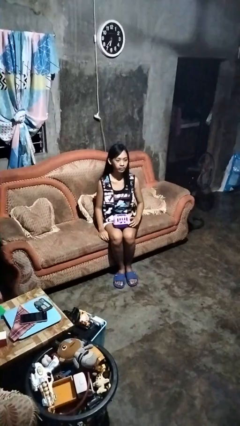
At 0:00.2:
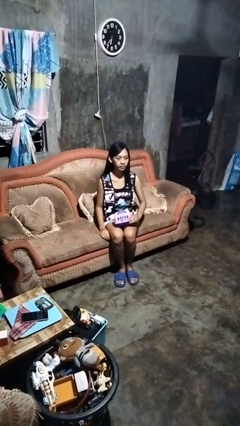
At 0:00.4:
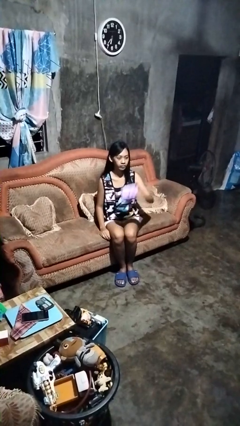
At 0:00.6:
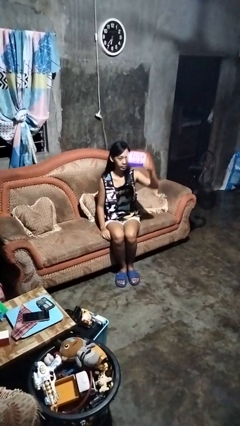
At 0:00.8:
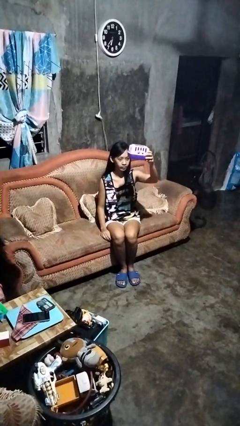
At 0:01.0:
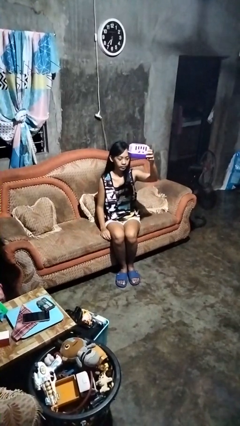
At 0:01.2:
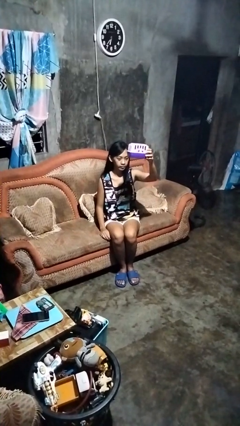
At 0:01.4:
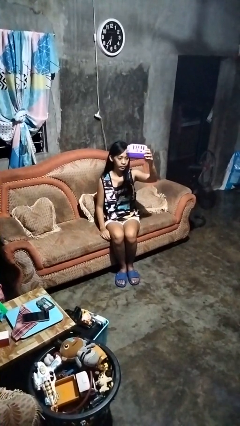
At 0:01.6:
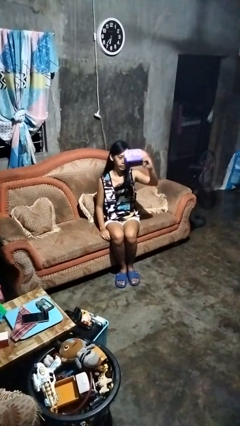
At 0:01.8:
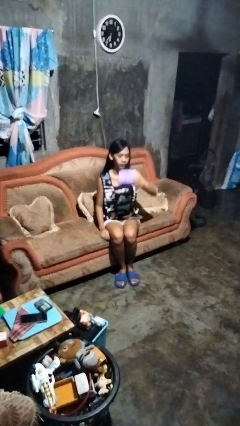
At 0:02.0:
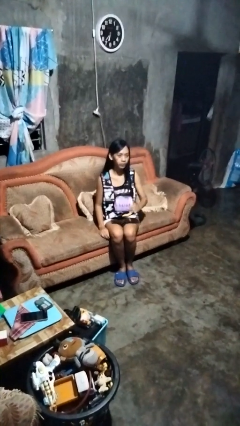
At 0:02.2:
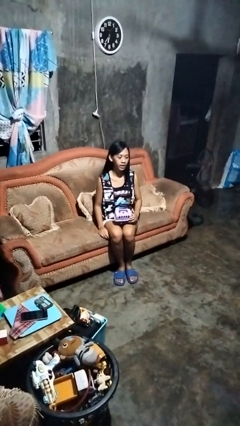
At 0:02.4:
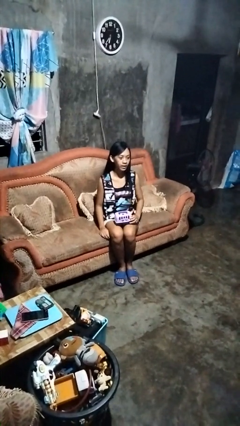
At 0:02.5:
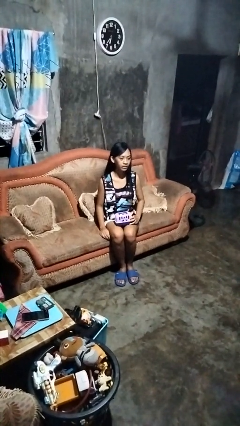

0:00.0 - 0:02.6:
person holds object above head

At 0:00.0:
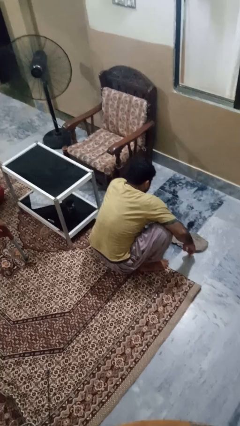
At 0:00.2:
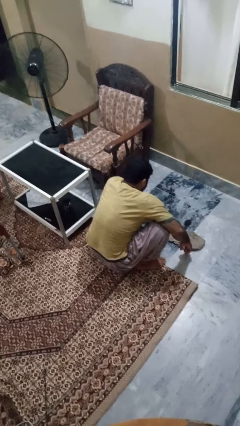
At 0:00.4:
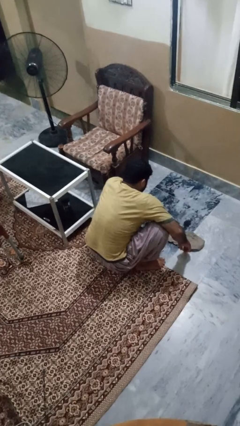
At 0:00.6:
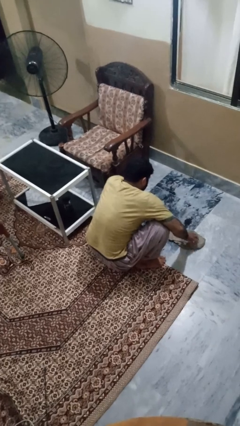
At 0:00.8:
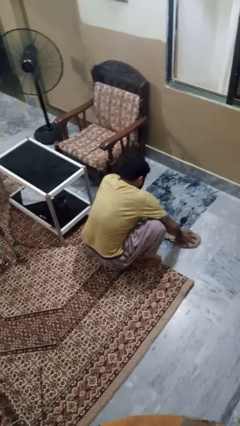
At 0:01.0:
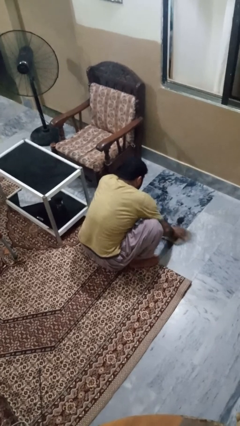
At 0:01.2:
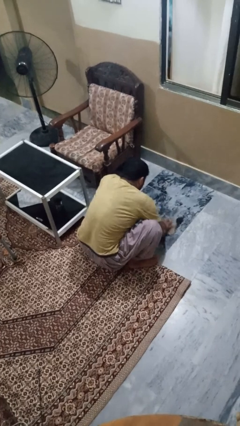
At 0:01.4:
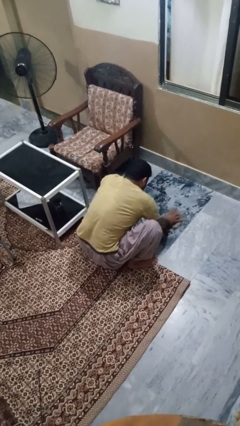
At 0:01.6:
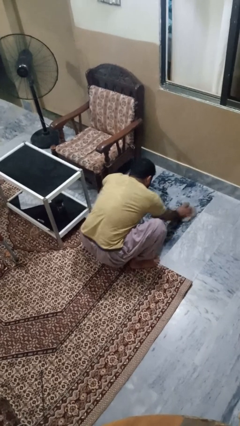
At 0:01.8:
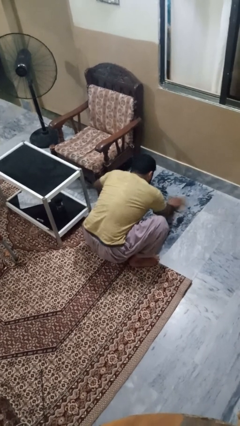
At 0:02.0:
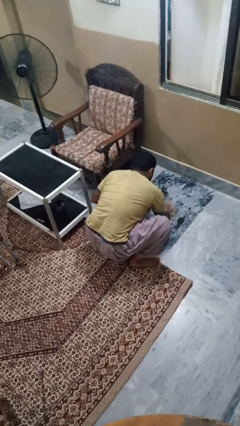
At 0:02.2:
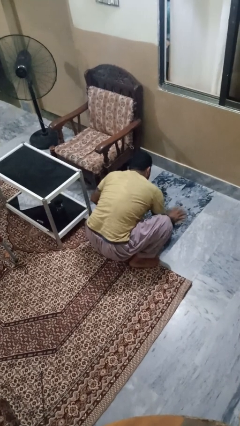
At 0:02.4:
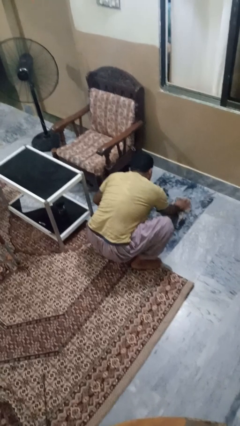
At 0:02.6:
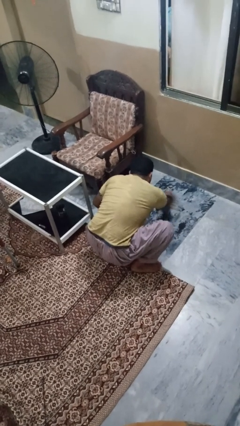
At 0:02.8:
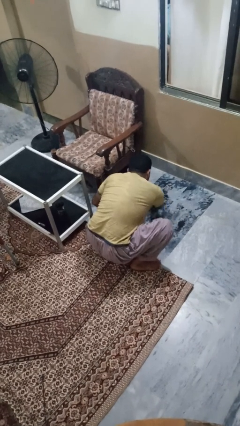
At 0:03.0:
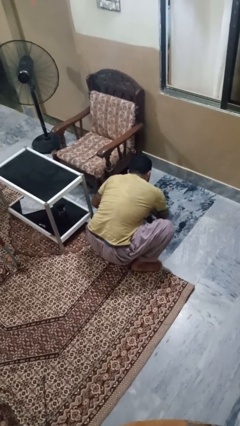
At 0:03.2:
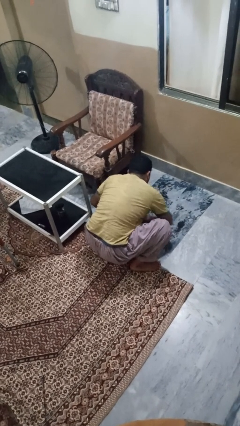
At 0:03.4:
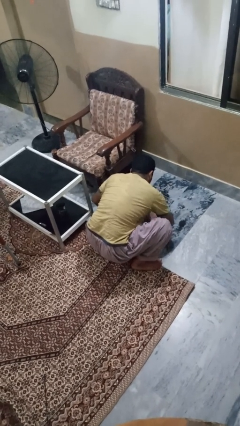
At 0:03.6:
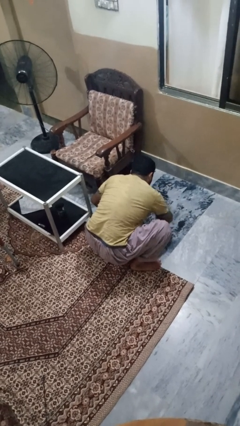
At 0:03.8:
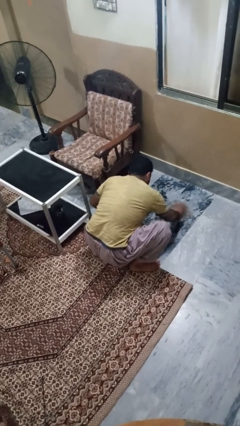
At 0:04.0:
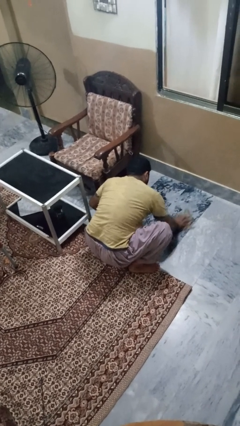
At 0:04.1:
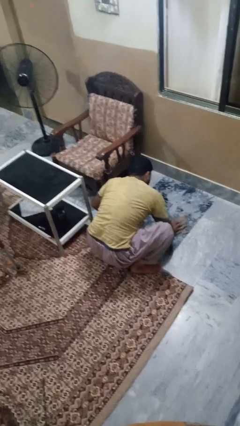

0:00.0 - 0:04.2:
person mops

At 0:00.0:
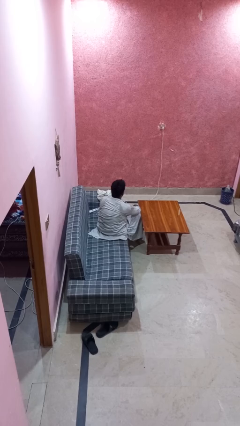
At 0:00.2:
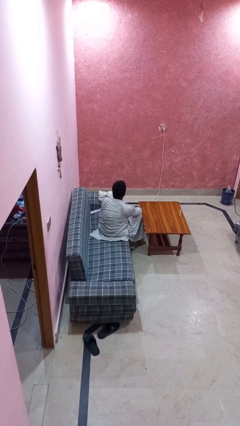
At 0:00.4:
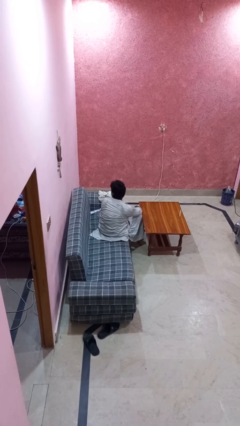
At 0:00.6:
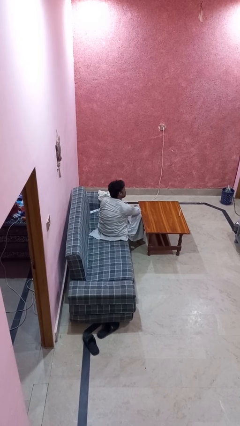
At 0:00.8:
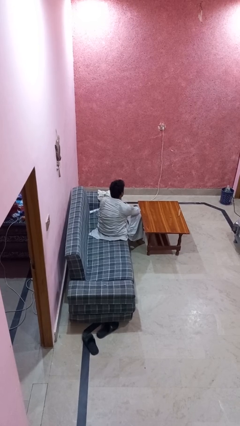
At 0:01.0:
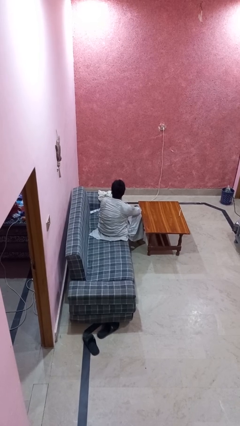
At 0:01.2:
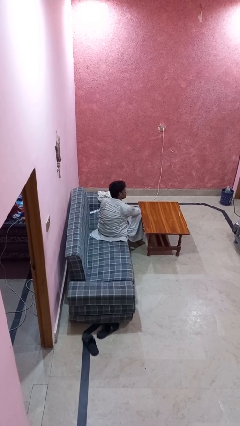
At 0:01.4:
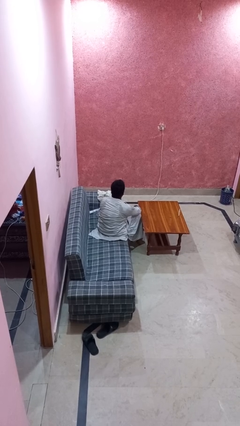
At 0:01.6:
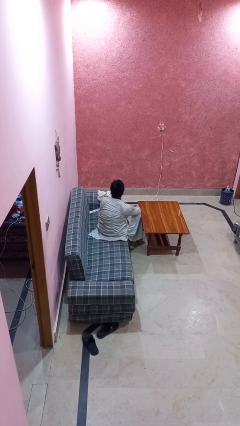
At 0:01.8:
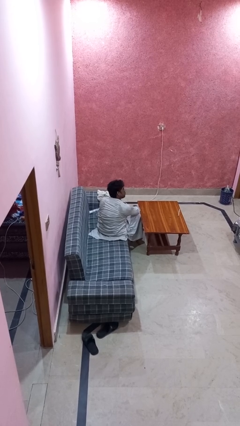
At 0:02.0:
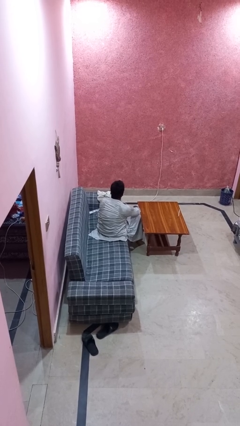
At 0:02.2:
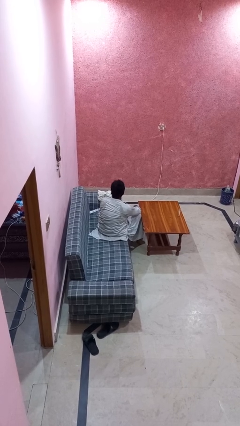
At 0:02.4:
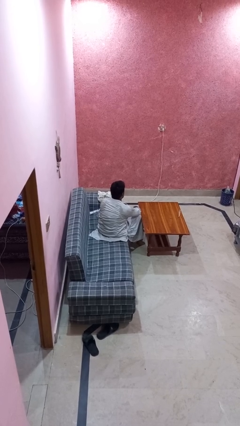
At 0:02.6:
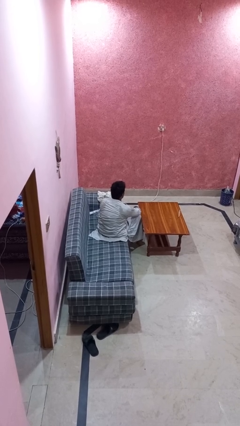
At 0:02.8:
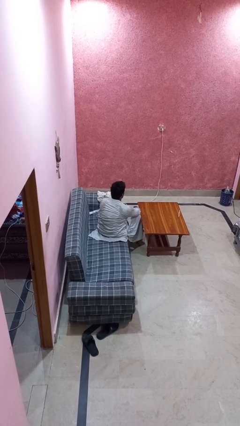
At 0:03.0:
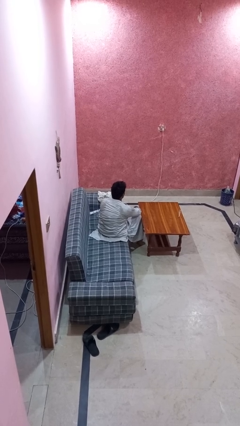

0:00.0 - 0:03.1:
person shakes head

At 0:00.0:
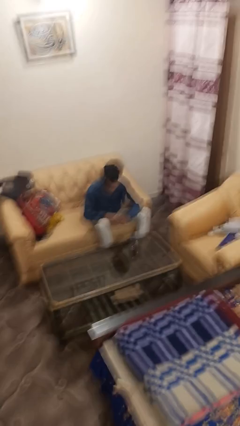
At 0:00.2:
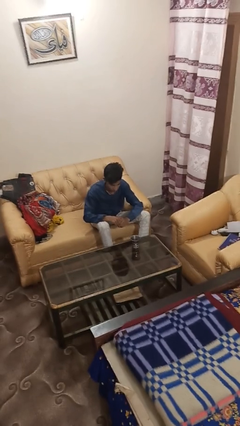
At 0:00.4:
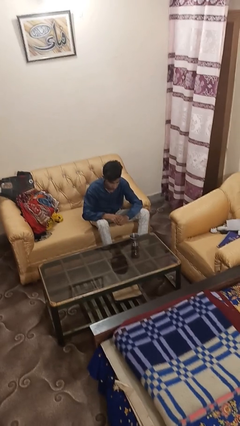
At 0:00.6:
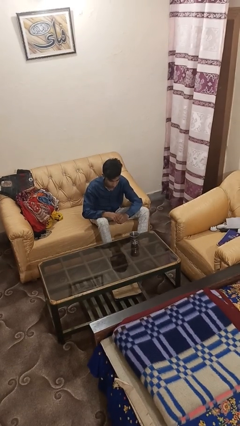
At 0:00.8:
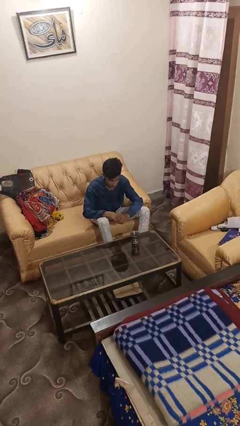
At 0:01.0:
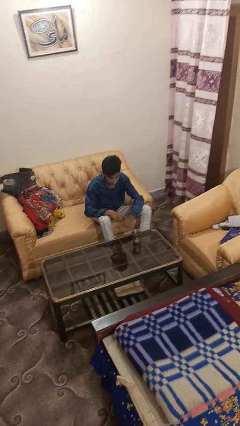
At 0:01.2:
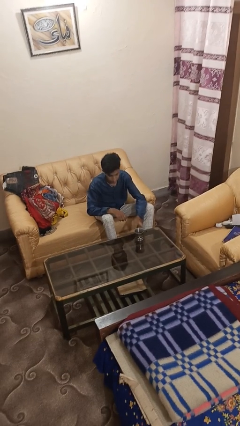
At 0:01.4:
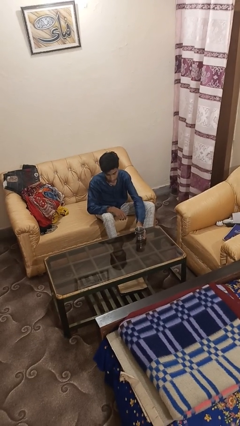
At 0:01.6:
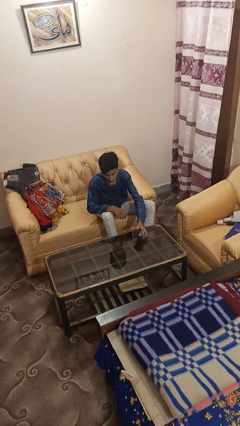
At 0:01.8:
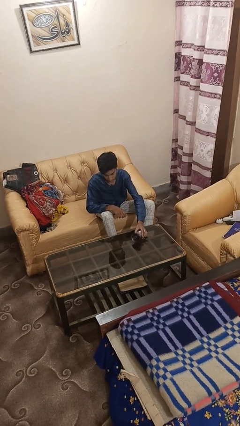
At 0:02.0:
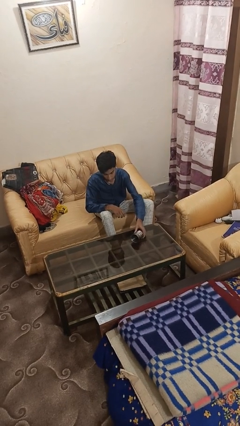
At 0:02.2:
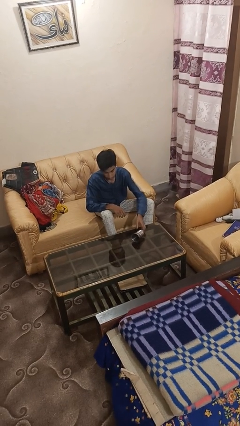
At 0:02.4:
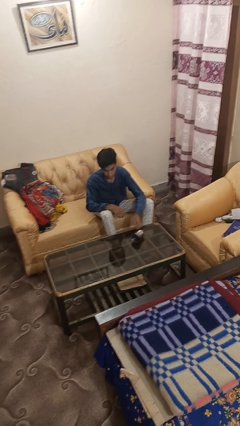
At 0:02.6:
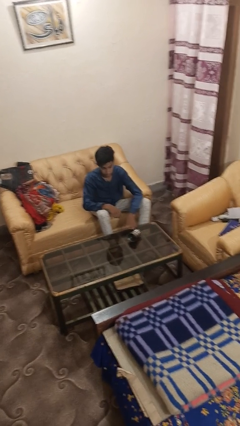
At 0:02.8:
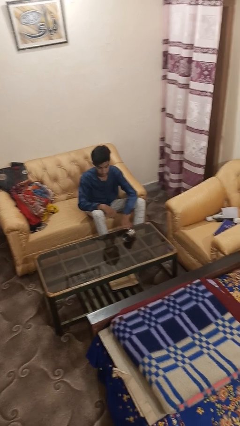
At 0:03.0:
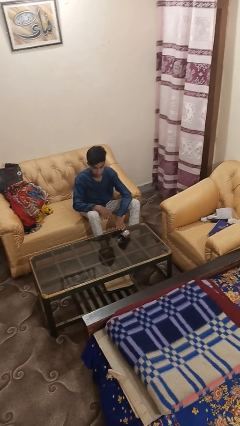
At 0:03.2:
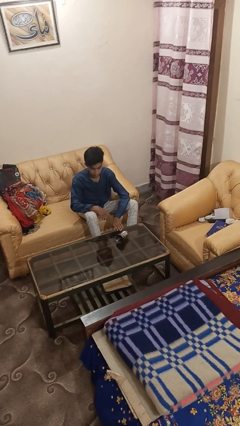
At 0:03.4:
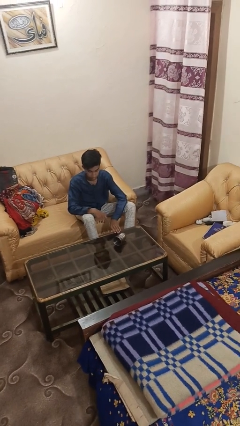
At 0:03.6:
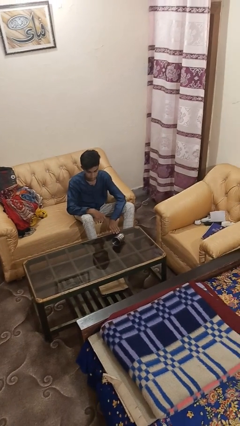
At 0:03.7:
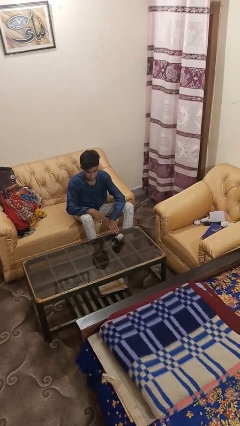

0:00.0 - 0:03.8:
person knocks over glass

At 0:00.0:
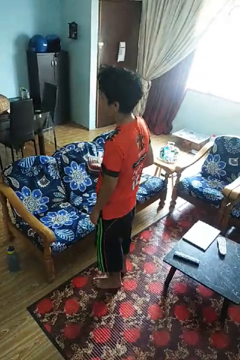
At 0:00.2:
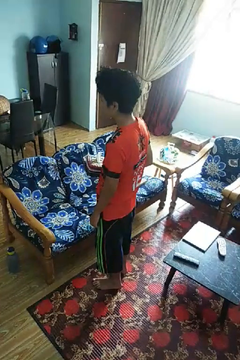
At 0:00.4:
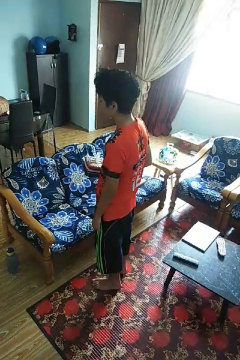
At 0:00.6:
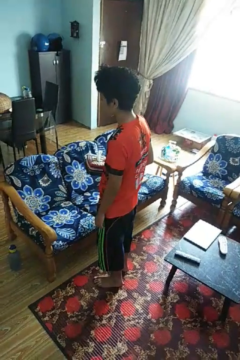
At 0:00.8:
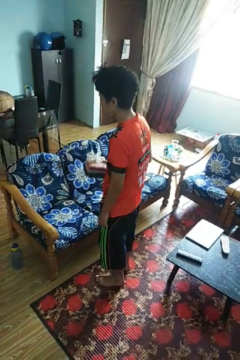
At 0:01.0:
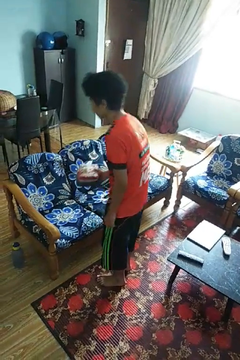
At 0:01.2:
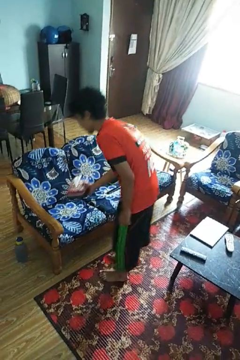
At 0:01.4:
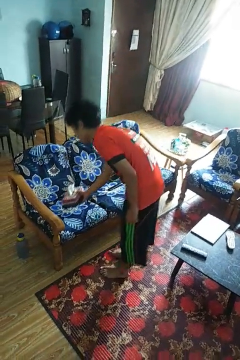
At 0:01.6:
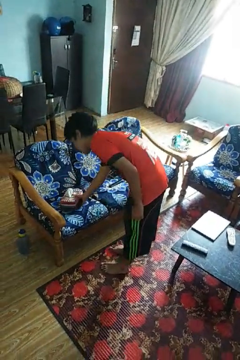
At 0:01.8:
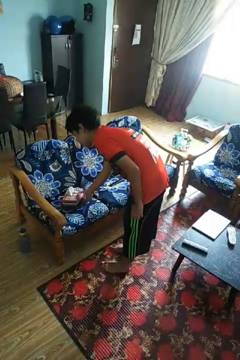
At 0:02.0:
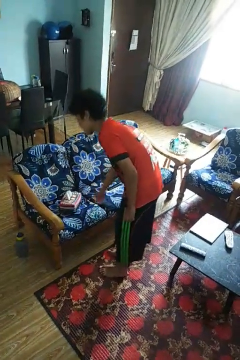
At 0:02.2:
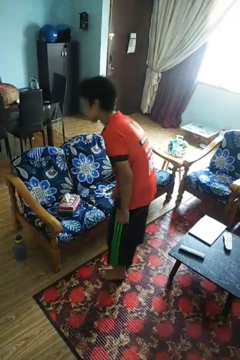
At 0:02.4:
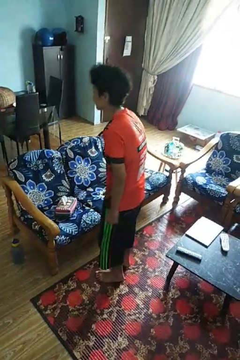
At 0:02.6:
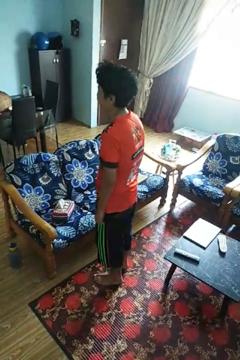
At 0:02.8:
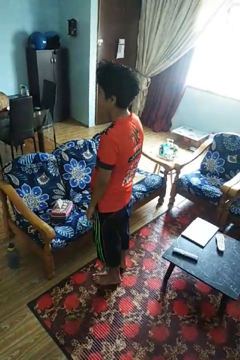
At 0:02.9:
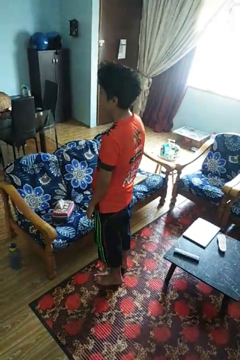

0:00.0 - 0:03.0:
person puts down object on couch

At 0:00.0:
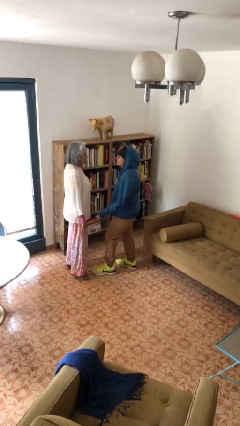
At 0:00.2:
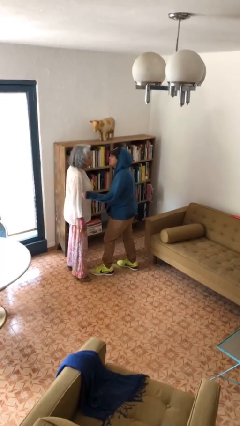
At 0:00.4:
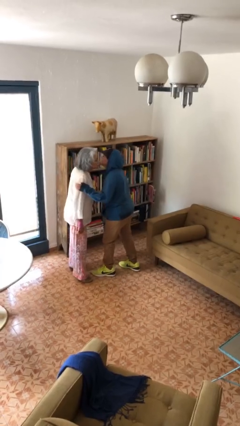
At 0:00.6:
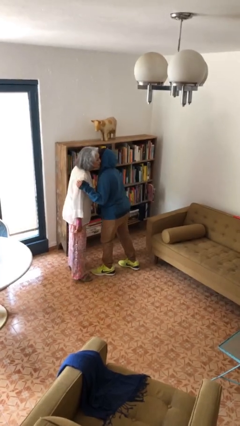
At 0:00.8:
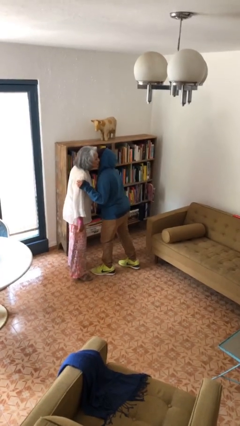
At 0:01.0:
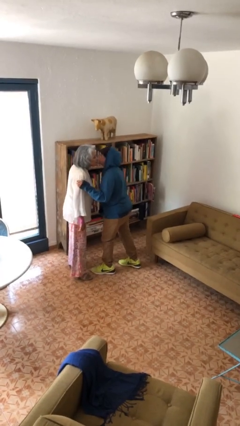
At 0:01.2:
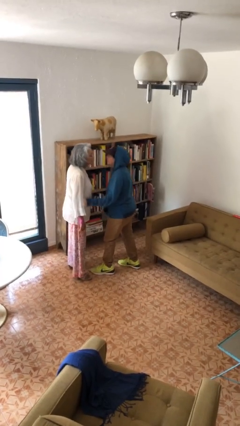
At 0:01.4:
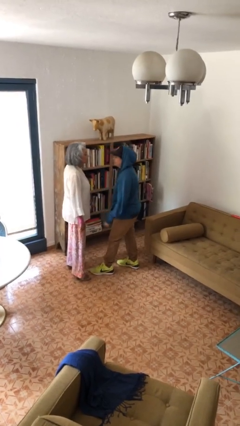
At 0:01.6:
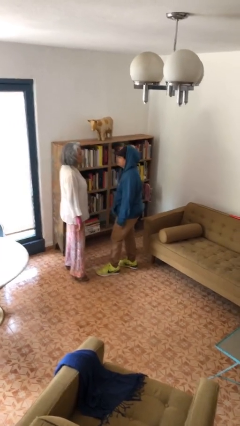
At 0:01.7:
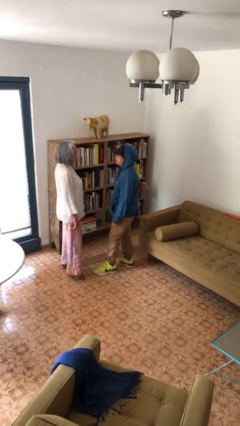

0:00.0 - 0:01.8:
person kisses cheek of person
